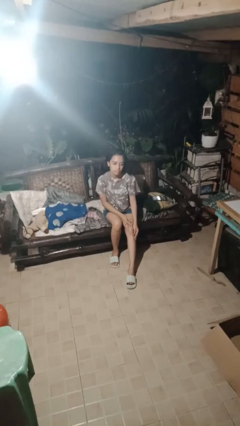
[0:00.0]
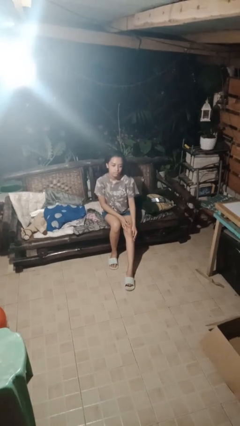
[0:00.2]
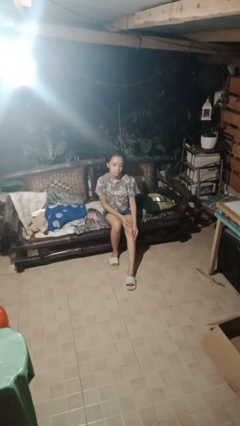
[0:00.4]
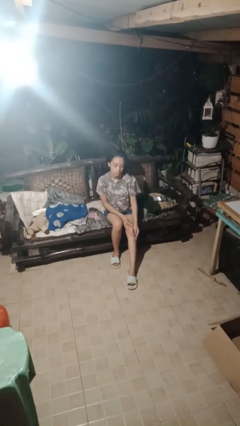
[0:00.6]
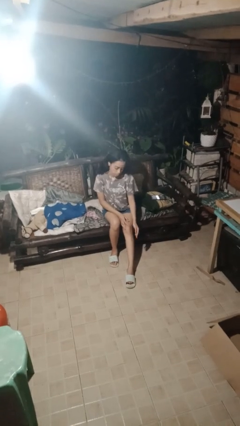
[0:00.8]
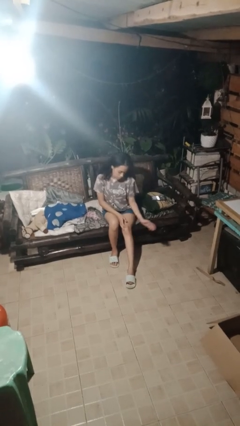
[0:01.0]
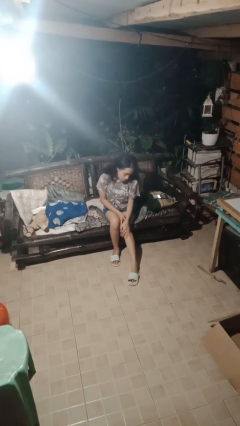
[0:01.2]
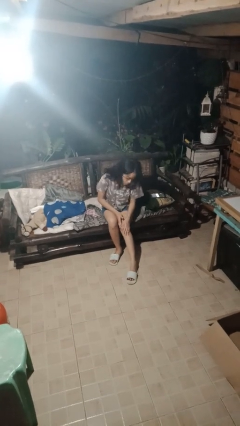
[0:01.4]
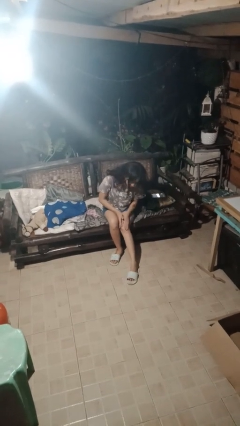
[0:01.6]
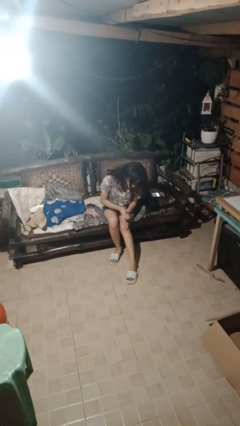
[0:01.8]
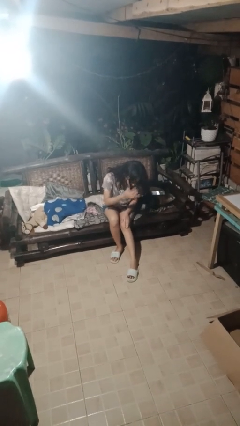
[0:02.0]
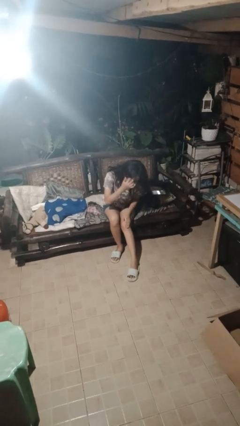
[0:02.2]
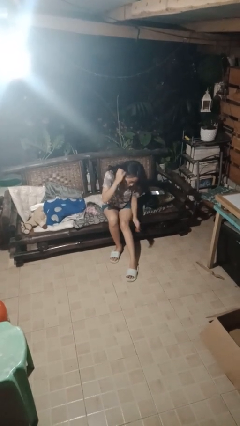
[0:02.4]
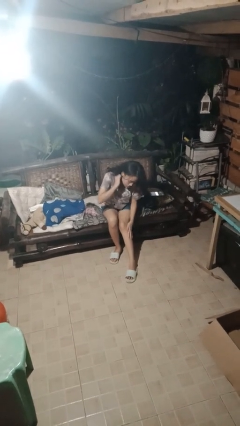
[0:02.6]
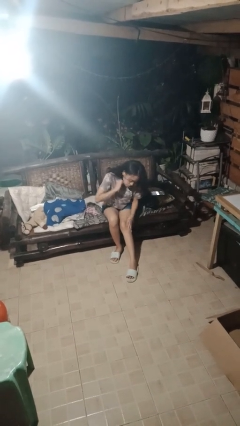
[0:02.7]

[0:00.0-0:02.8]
person swats bug

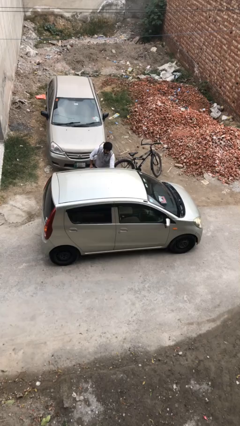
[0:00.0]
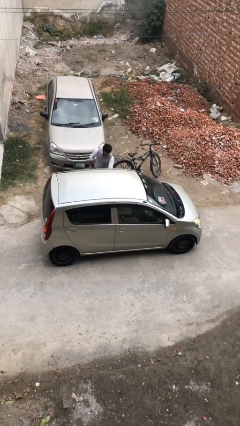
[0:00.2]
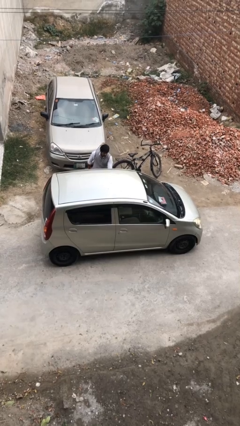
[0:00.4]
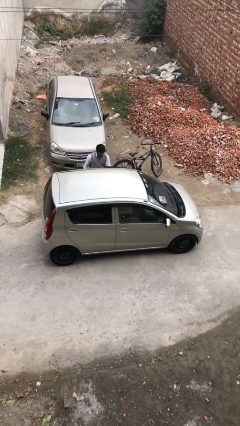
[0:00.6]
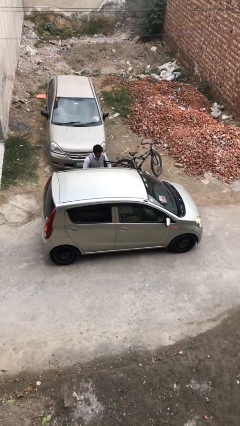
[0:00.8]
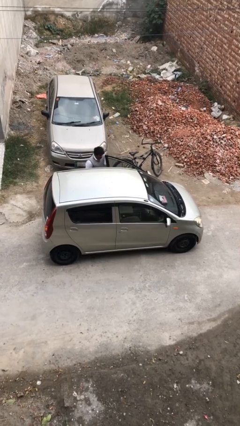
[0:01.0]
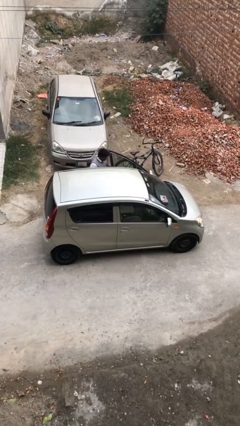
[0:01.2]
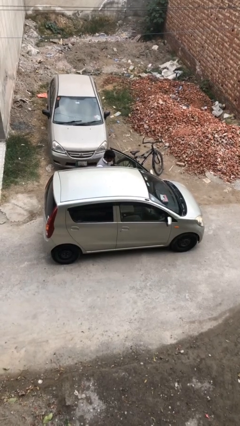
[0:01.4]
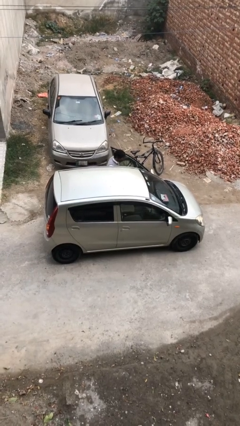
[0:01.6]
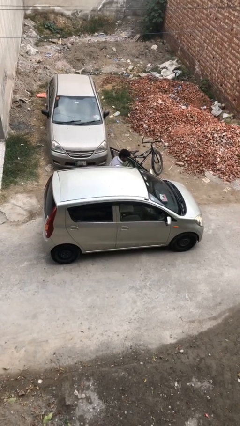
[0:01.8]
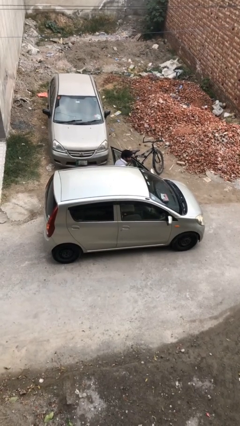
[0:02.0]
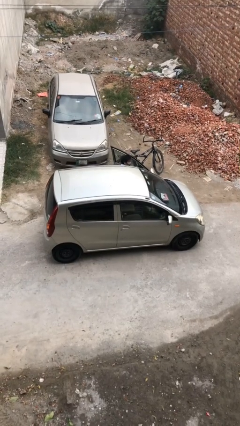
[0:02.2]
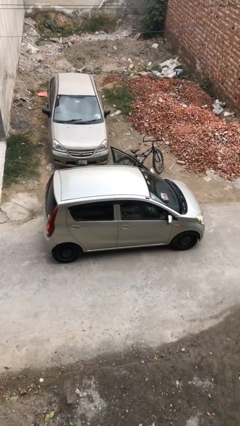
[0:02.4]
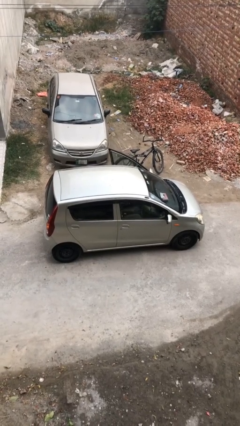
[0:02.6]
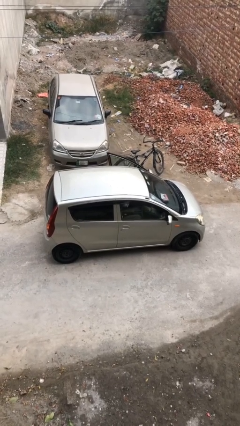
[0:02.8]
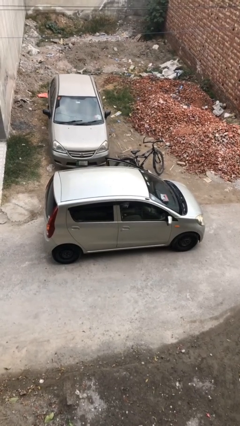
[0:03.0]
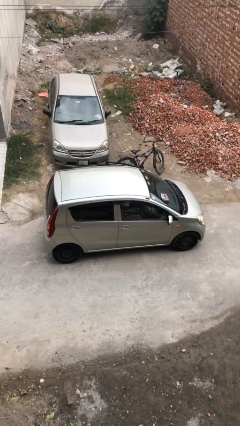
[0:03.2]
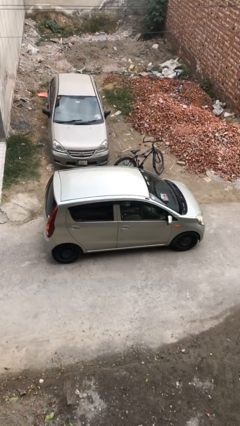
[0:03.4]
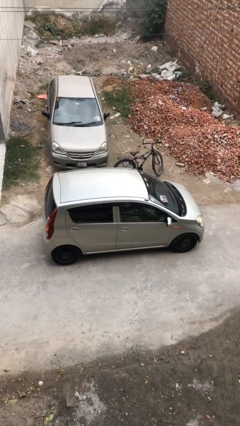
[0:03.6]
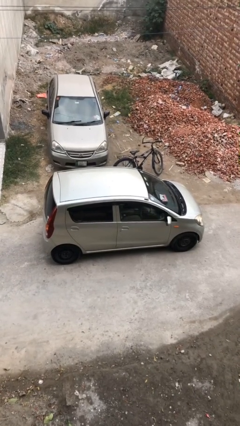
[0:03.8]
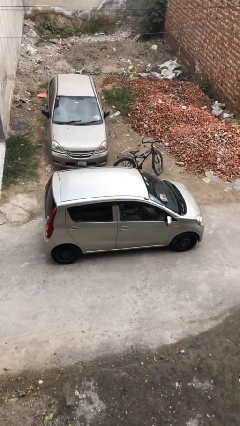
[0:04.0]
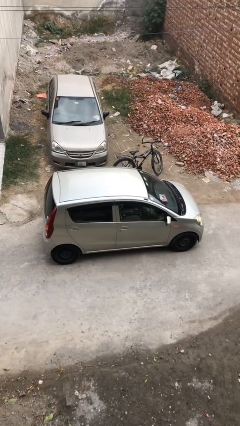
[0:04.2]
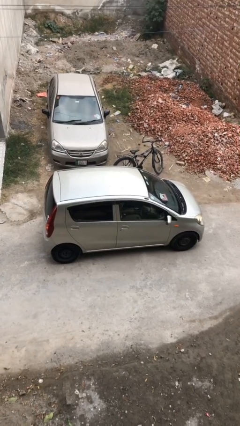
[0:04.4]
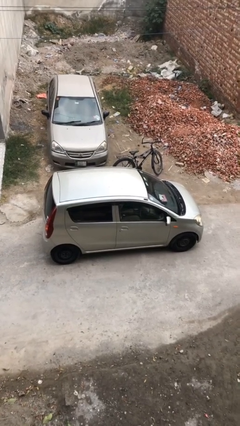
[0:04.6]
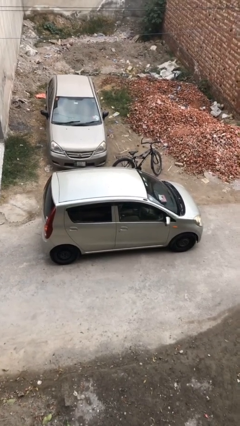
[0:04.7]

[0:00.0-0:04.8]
car picks up person

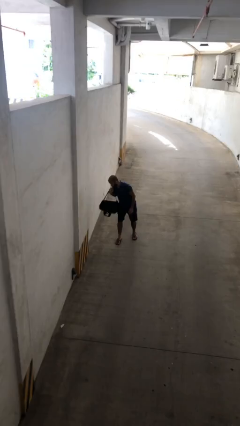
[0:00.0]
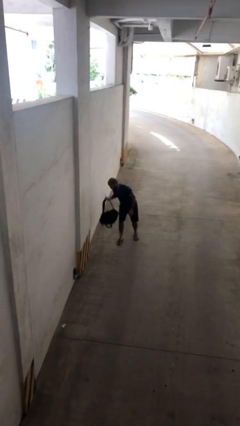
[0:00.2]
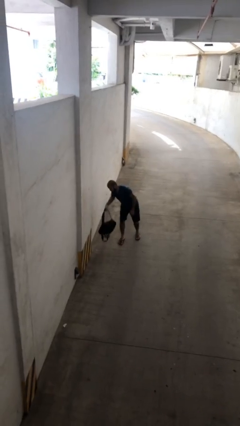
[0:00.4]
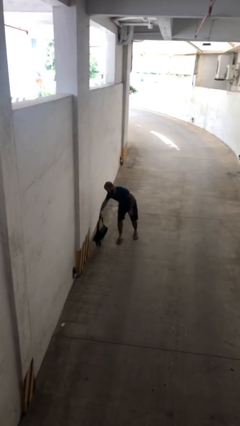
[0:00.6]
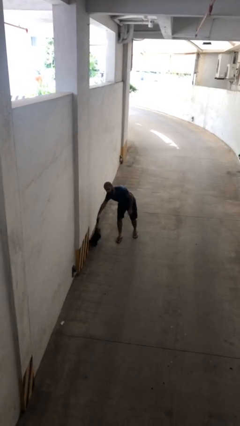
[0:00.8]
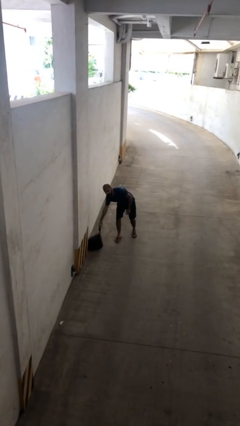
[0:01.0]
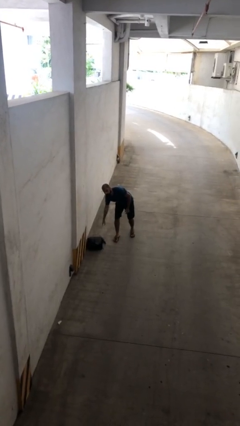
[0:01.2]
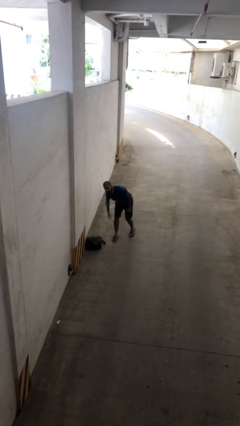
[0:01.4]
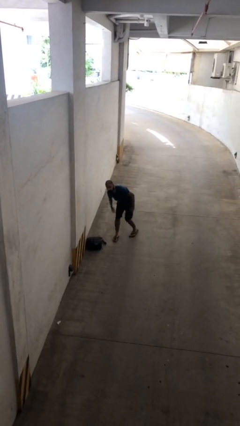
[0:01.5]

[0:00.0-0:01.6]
person puts down object on floor

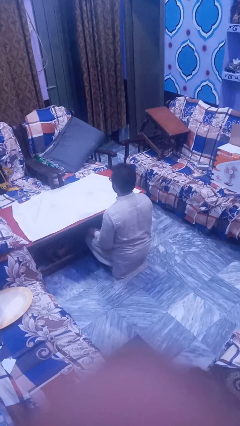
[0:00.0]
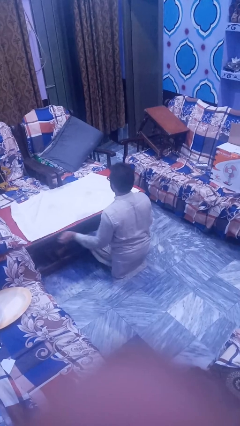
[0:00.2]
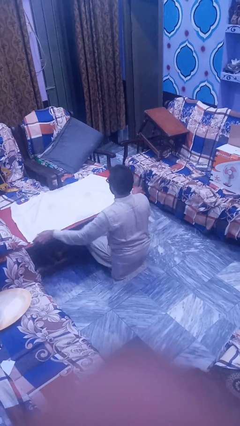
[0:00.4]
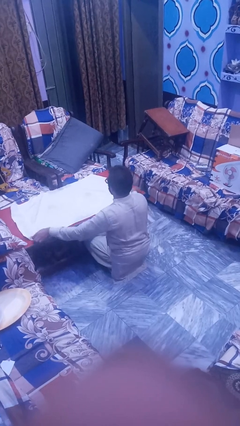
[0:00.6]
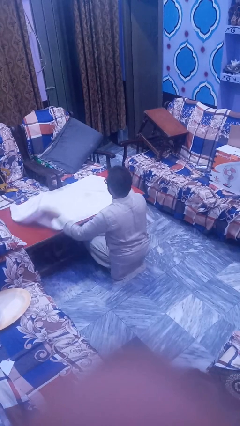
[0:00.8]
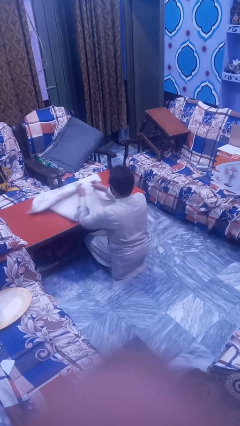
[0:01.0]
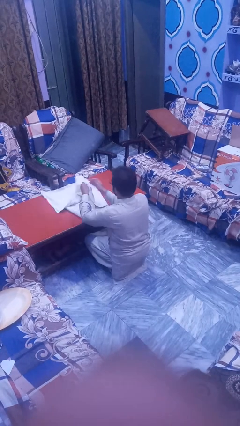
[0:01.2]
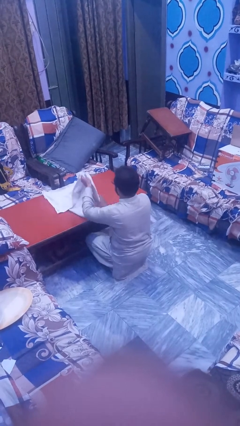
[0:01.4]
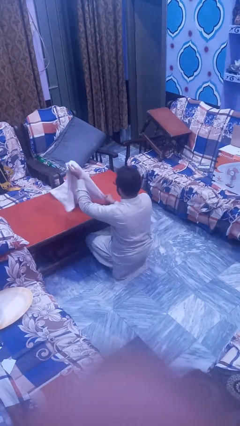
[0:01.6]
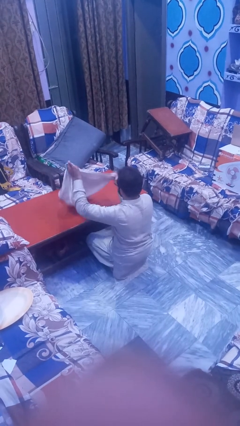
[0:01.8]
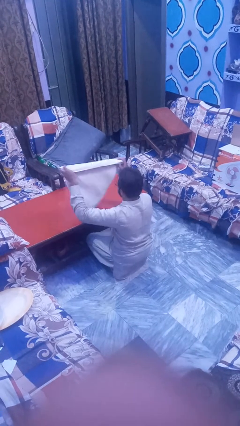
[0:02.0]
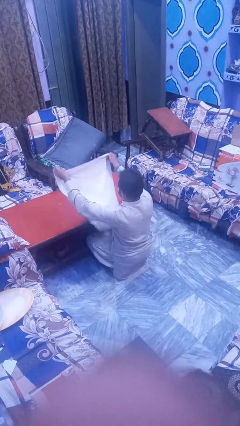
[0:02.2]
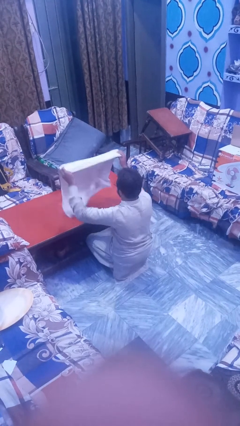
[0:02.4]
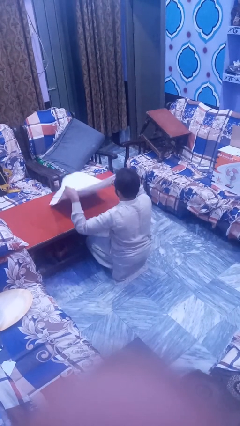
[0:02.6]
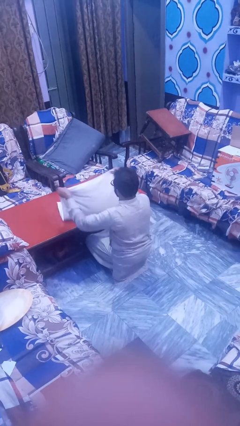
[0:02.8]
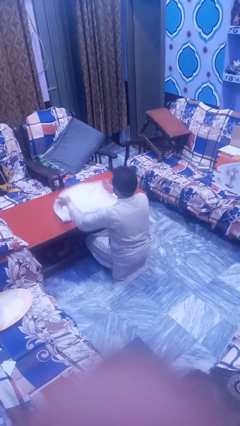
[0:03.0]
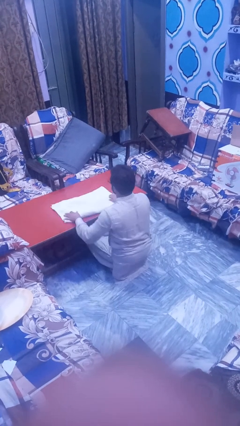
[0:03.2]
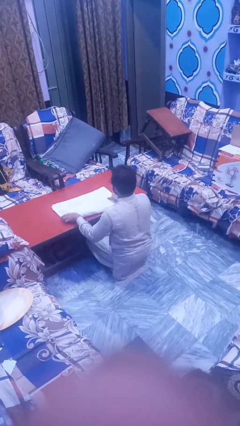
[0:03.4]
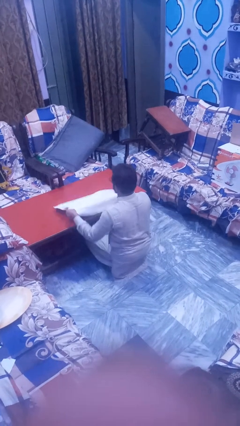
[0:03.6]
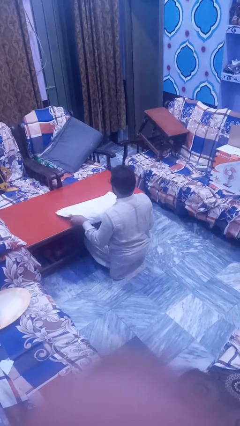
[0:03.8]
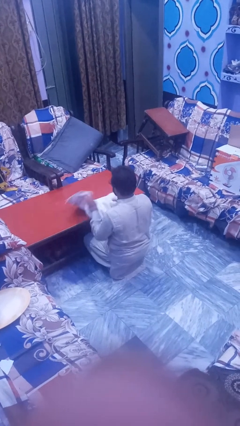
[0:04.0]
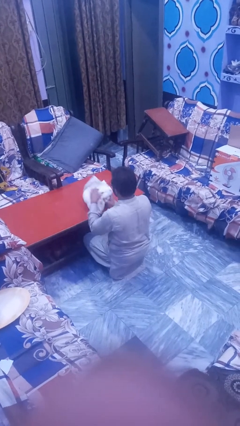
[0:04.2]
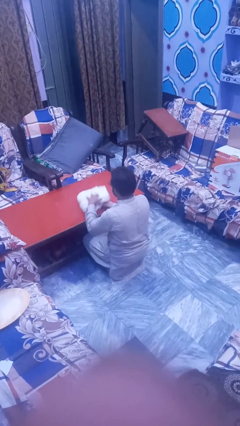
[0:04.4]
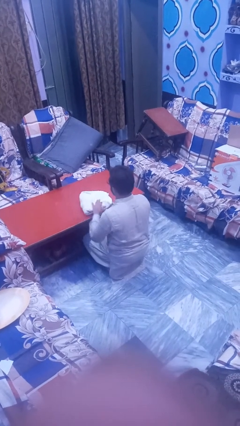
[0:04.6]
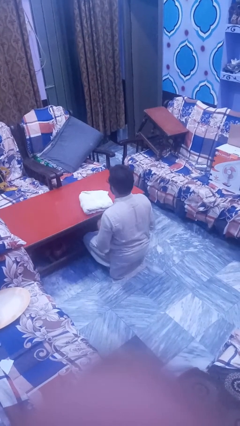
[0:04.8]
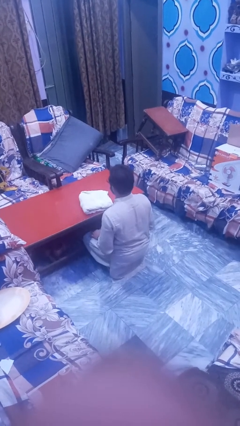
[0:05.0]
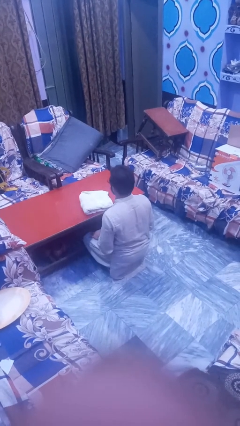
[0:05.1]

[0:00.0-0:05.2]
person folds tablecloth

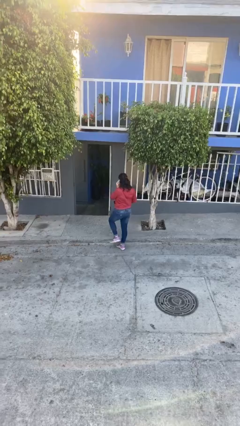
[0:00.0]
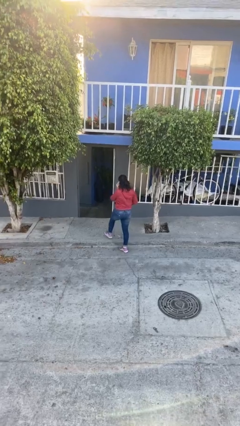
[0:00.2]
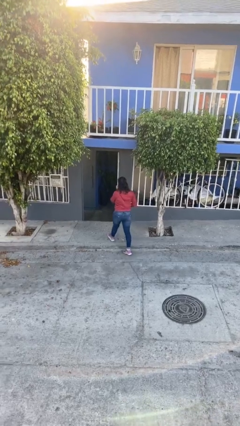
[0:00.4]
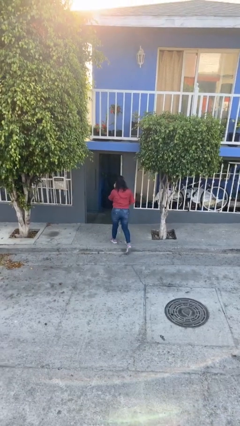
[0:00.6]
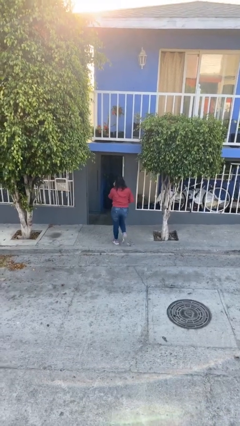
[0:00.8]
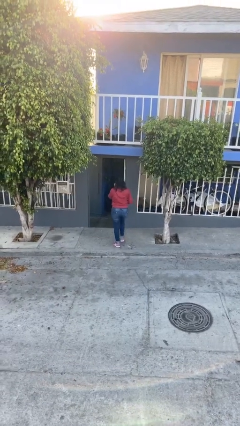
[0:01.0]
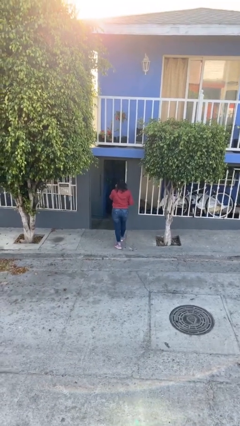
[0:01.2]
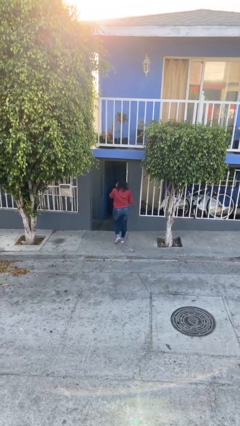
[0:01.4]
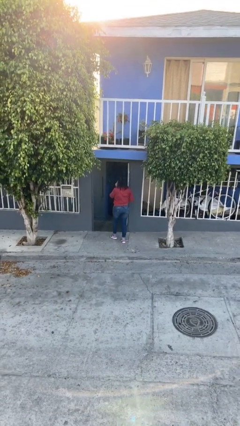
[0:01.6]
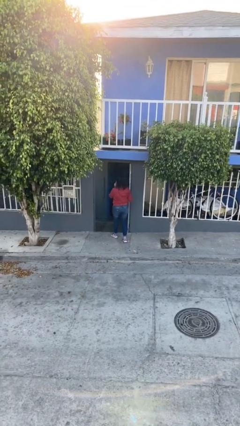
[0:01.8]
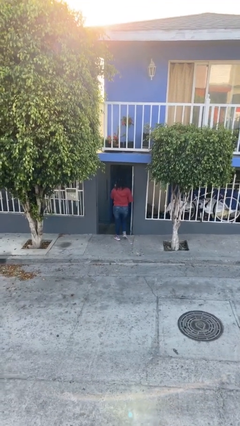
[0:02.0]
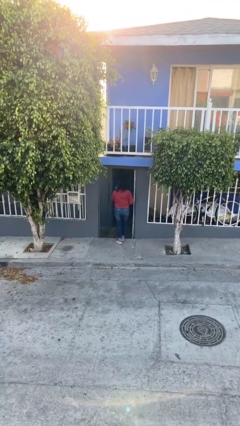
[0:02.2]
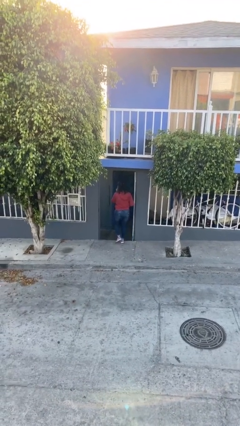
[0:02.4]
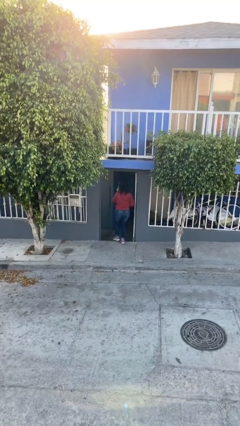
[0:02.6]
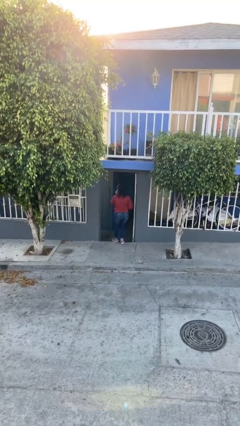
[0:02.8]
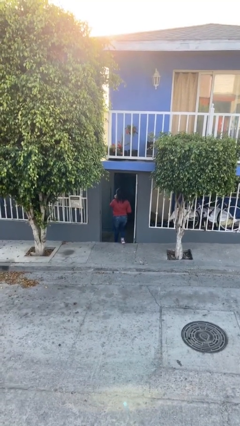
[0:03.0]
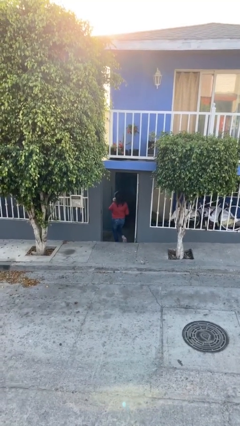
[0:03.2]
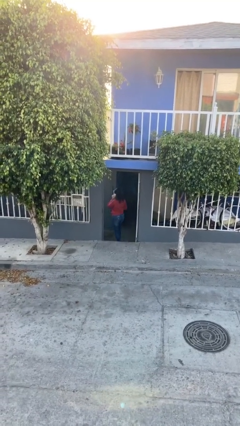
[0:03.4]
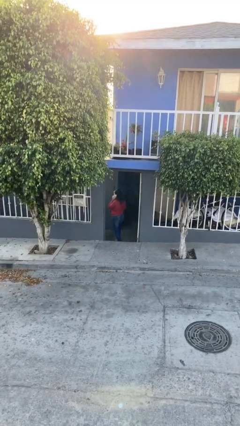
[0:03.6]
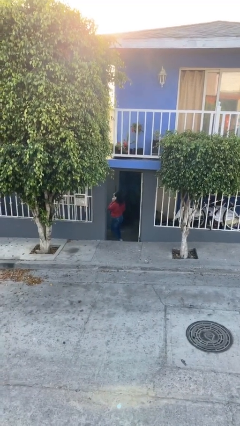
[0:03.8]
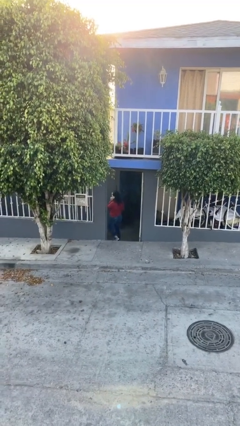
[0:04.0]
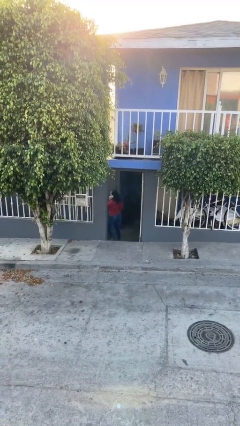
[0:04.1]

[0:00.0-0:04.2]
person exits scene through structure
